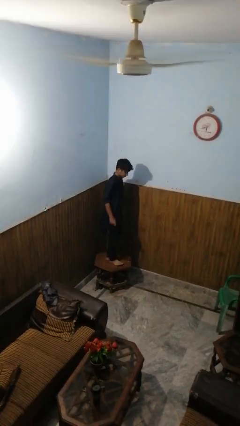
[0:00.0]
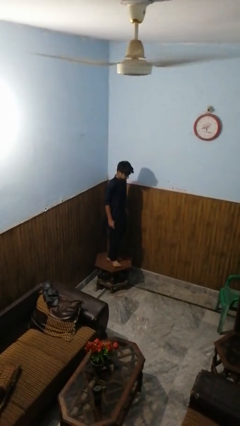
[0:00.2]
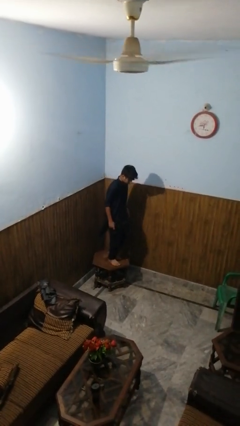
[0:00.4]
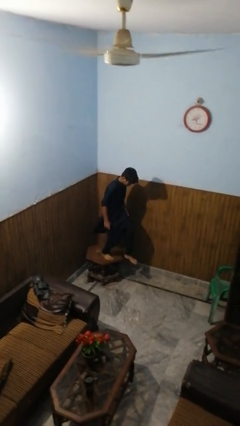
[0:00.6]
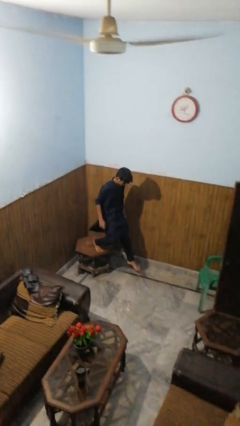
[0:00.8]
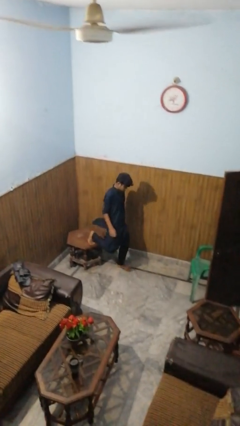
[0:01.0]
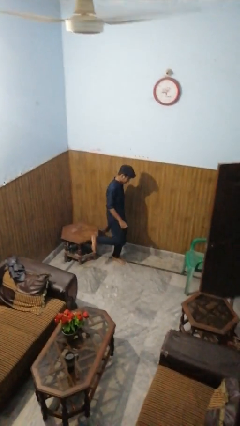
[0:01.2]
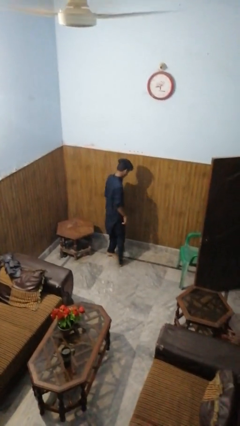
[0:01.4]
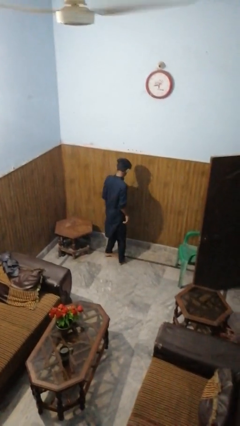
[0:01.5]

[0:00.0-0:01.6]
person climbs off table

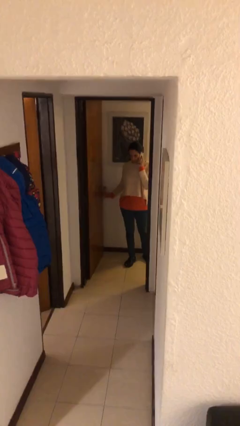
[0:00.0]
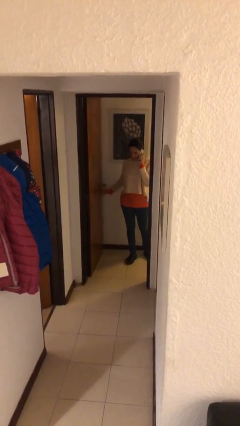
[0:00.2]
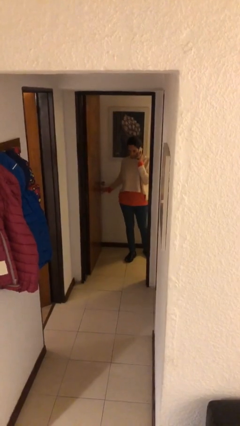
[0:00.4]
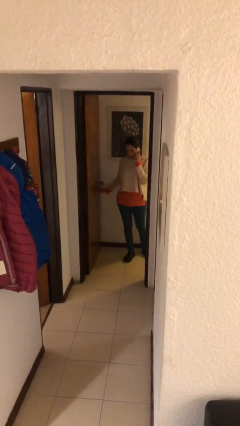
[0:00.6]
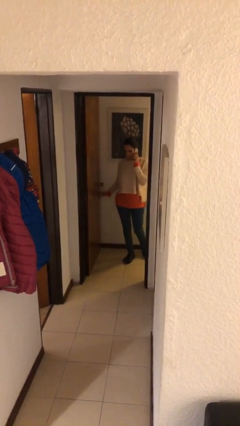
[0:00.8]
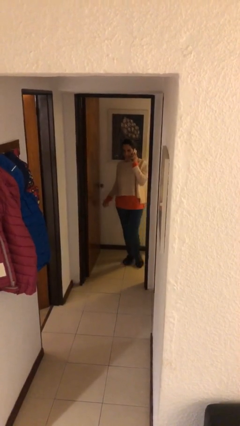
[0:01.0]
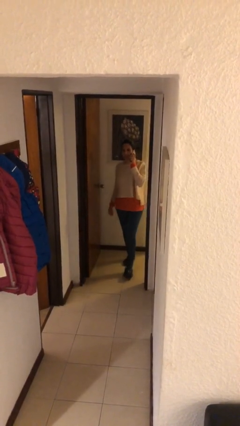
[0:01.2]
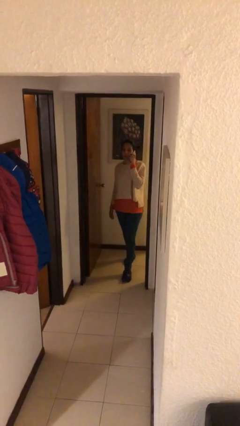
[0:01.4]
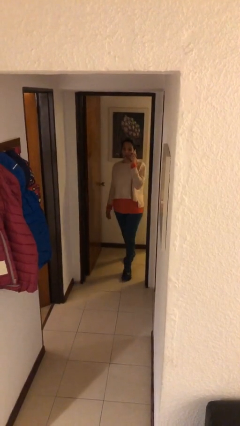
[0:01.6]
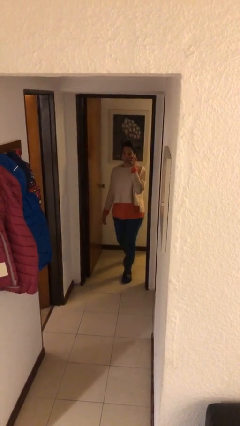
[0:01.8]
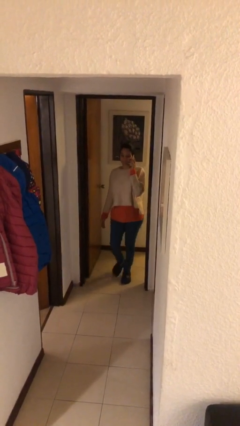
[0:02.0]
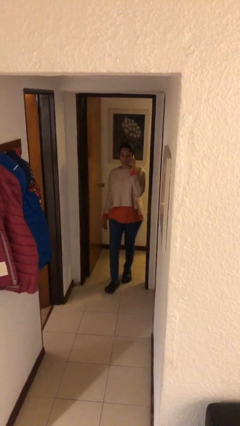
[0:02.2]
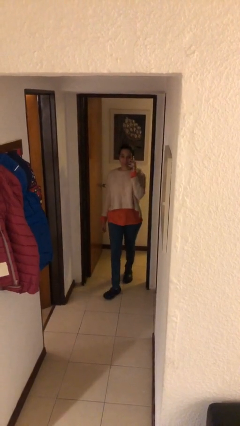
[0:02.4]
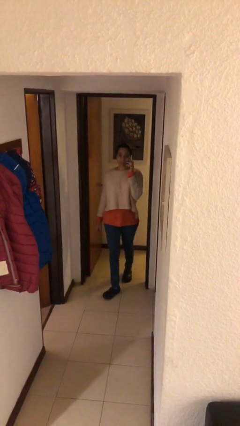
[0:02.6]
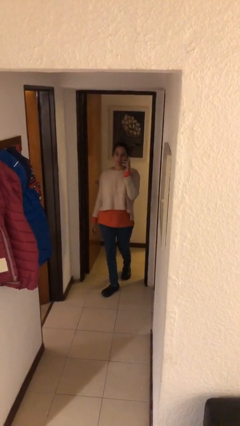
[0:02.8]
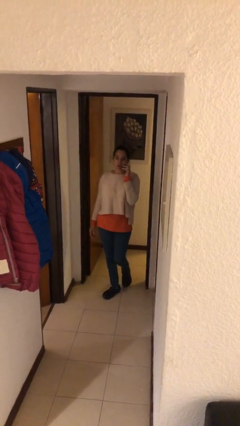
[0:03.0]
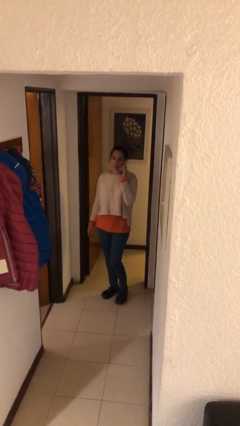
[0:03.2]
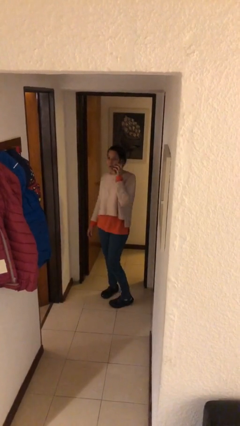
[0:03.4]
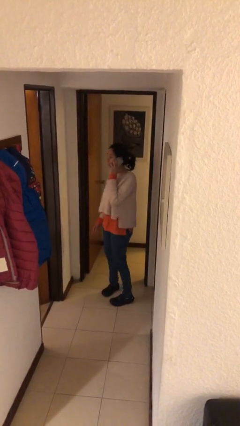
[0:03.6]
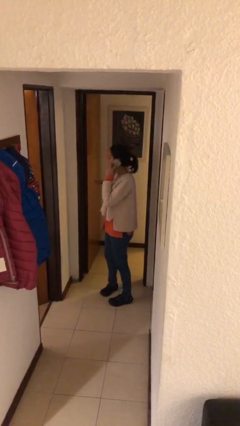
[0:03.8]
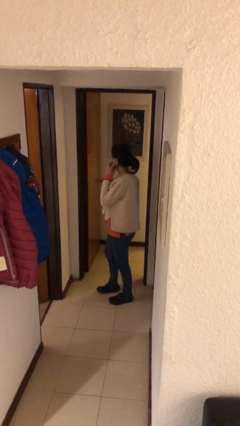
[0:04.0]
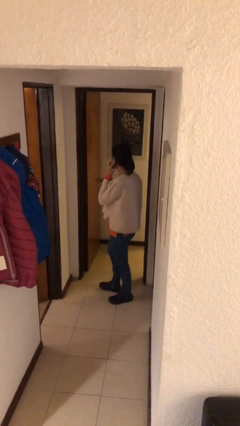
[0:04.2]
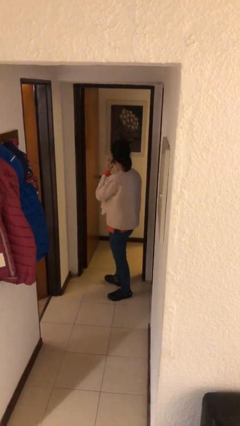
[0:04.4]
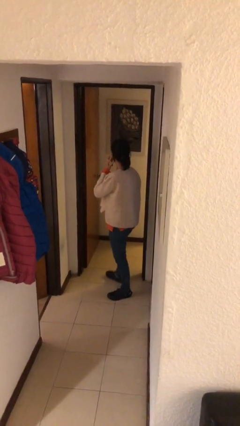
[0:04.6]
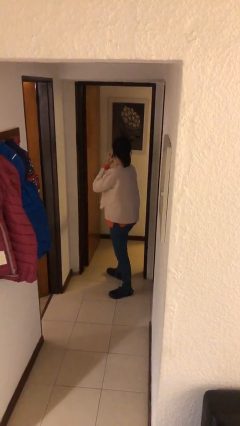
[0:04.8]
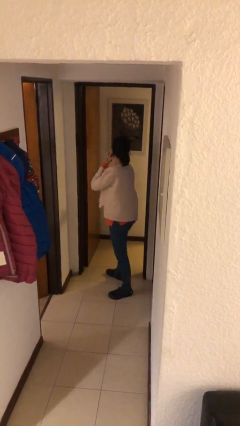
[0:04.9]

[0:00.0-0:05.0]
person enters scene through structure

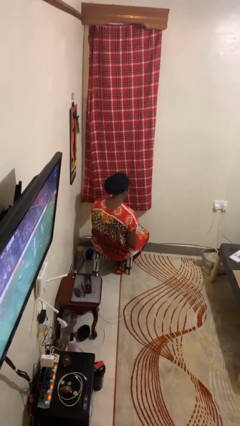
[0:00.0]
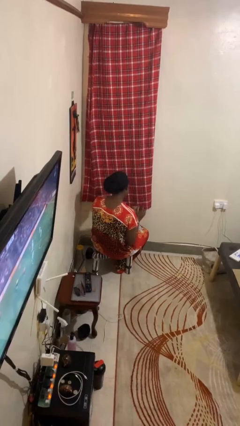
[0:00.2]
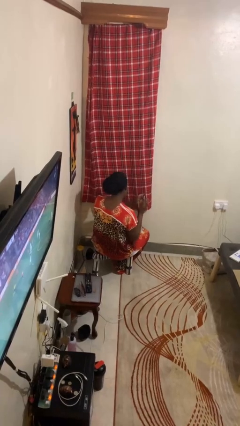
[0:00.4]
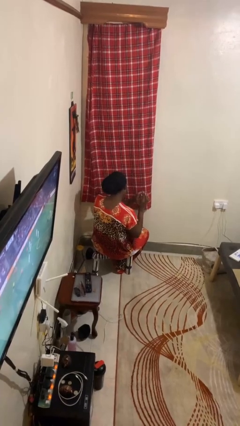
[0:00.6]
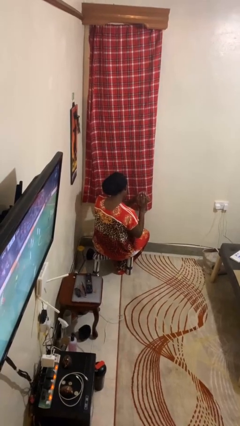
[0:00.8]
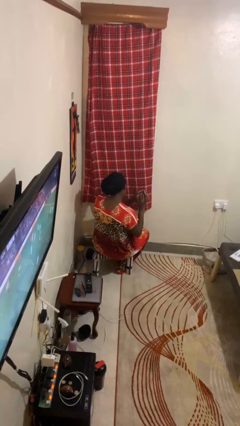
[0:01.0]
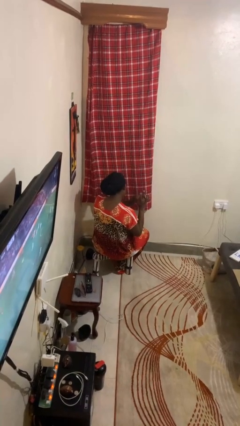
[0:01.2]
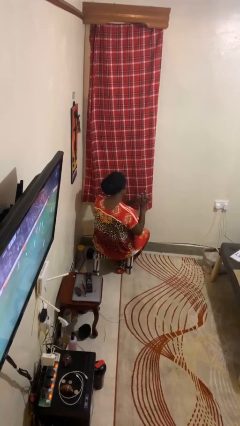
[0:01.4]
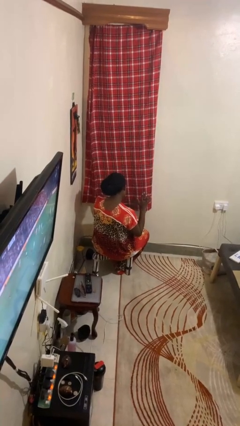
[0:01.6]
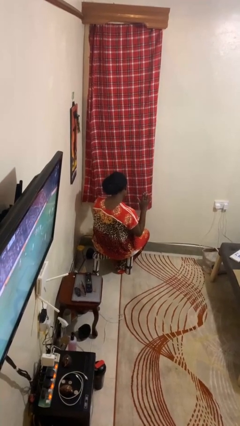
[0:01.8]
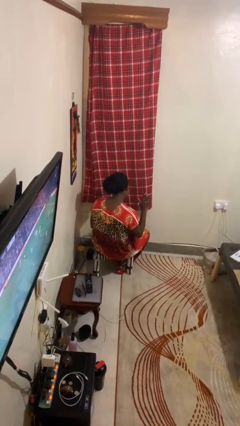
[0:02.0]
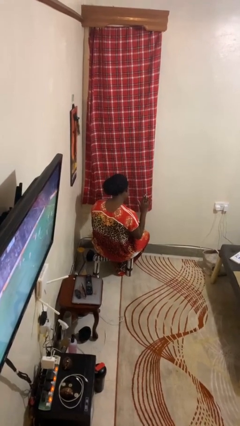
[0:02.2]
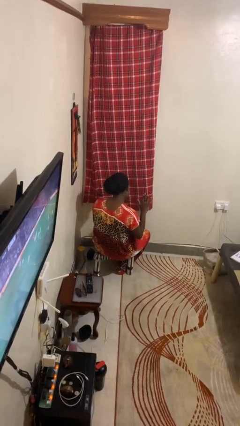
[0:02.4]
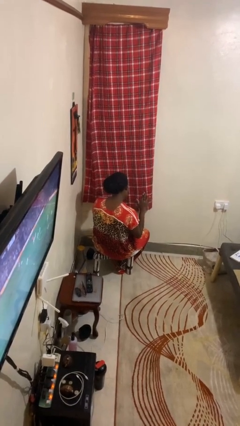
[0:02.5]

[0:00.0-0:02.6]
person puts on ring

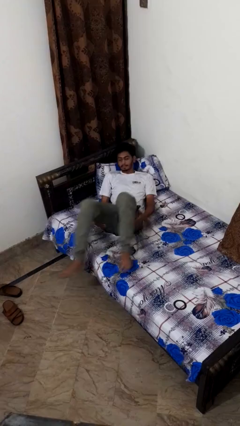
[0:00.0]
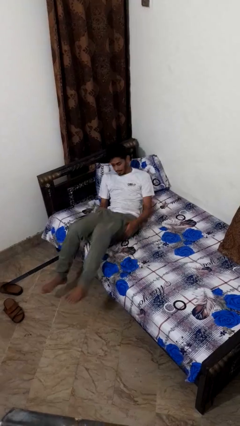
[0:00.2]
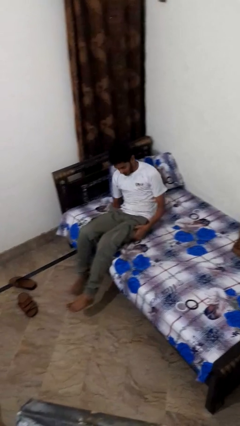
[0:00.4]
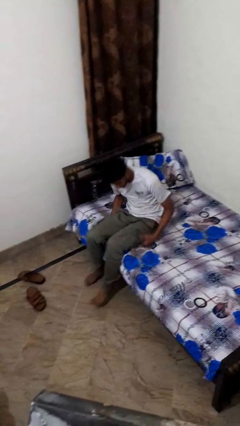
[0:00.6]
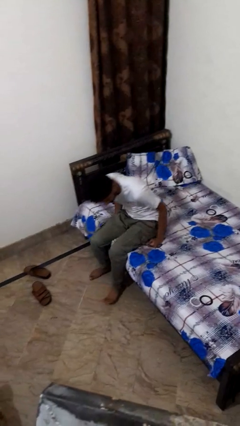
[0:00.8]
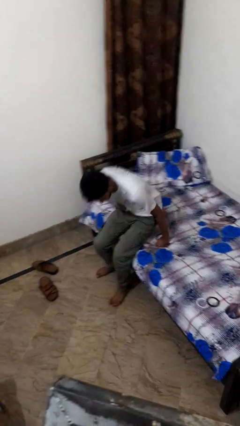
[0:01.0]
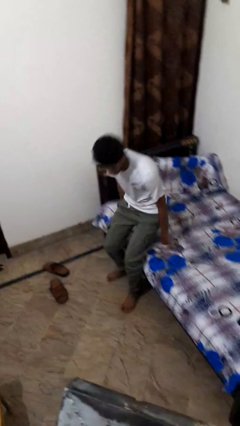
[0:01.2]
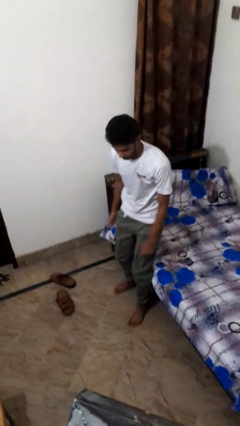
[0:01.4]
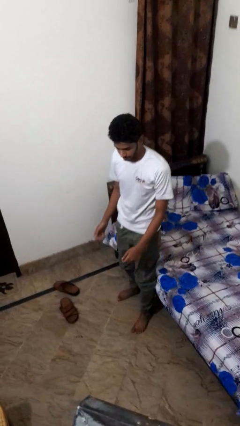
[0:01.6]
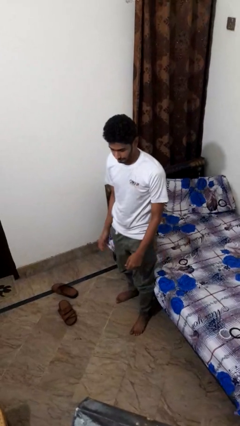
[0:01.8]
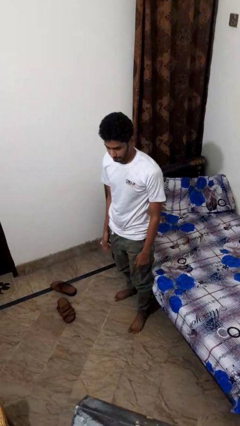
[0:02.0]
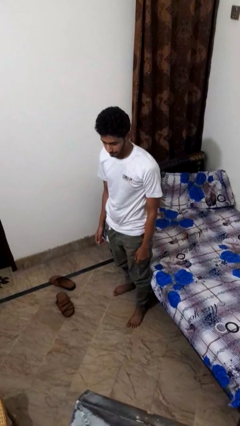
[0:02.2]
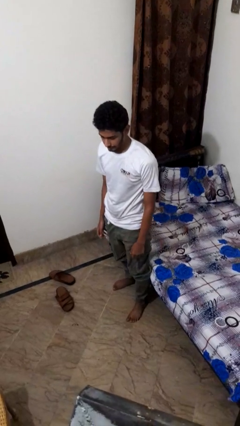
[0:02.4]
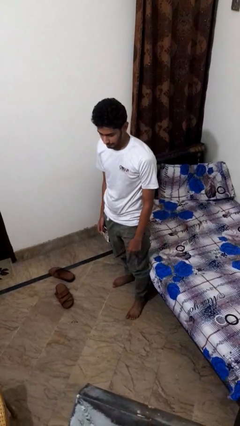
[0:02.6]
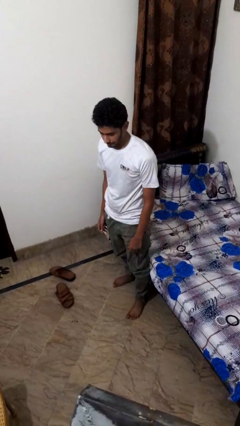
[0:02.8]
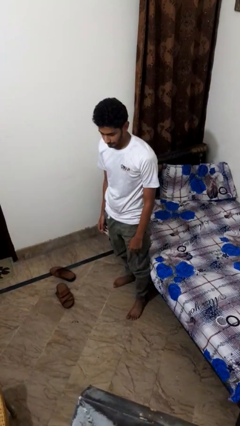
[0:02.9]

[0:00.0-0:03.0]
person stands up

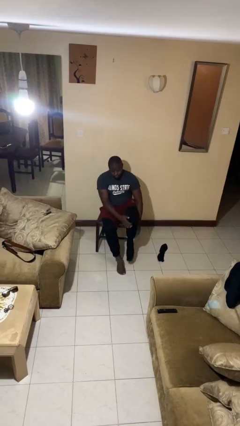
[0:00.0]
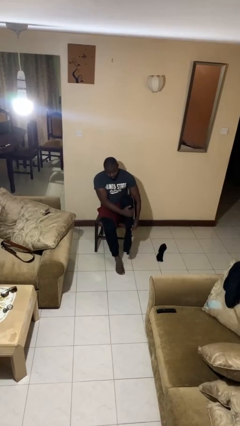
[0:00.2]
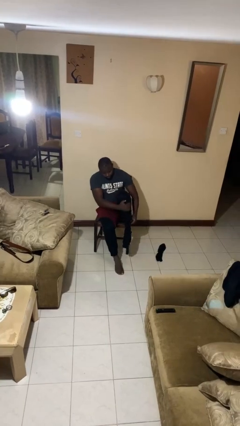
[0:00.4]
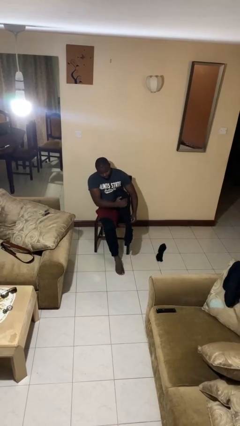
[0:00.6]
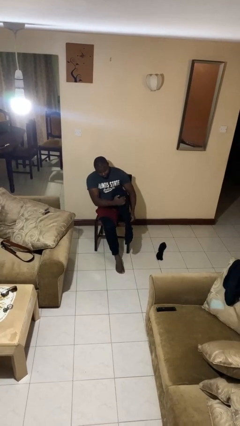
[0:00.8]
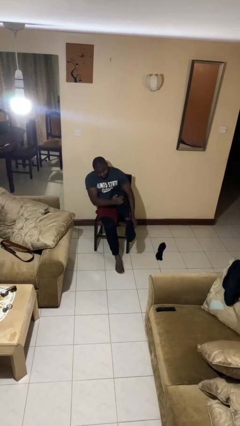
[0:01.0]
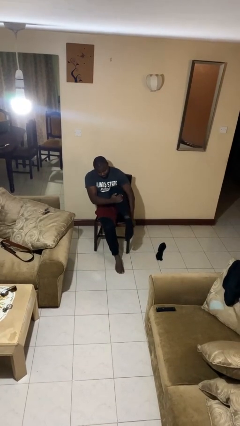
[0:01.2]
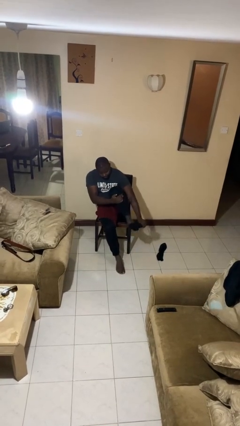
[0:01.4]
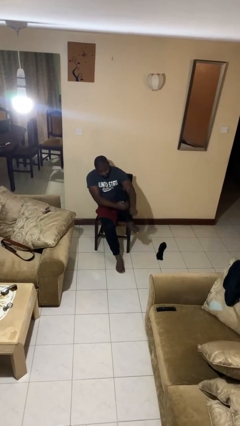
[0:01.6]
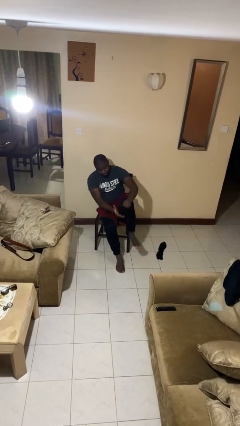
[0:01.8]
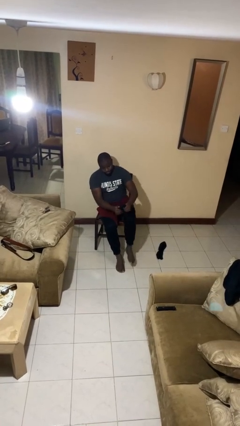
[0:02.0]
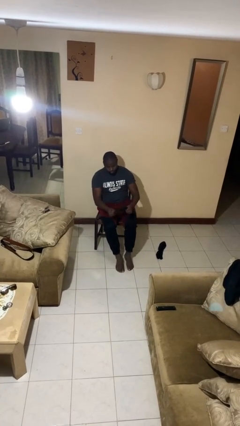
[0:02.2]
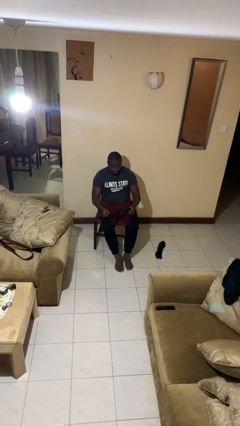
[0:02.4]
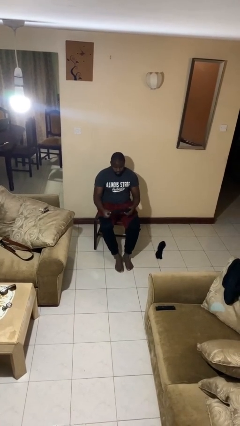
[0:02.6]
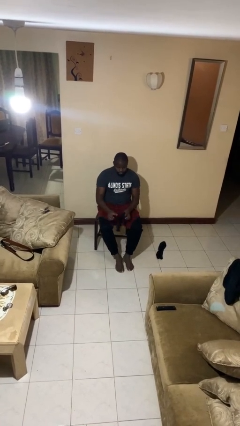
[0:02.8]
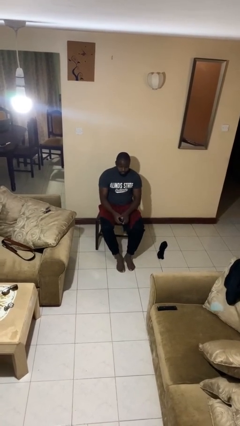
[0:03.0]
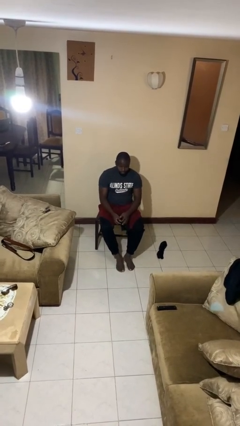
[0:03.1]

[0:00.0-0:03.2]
person takes off socks

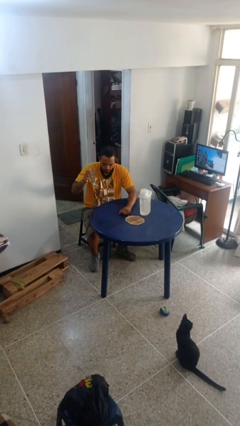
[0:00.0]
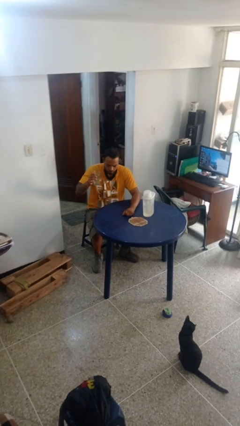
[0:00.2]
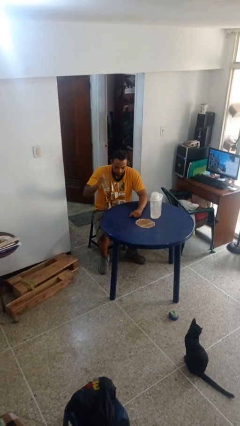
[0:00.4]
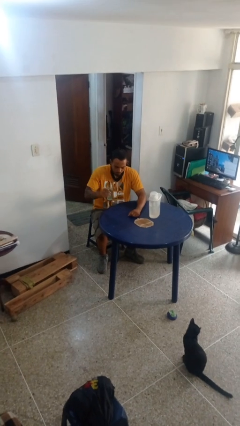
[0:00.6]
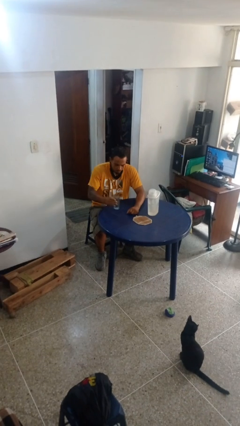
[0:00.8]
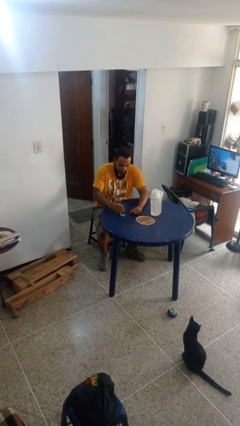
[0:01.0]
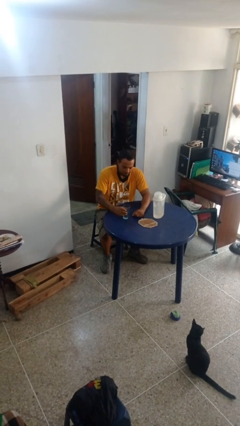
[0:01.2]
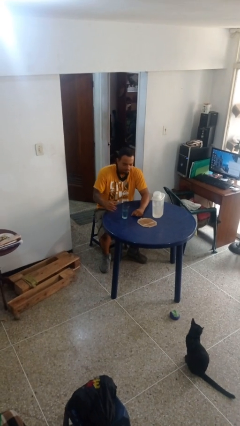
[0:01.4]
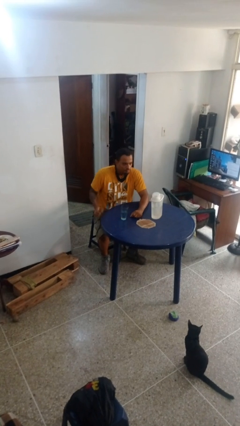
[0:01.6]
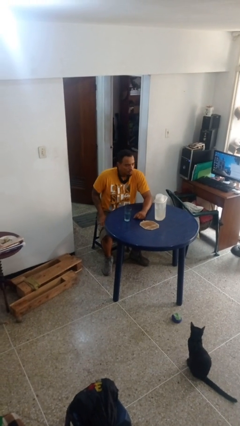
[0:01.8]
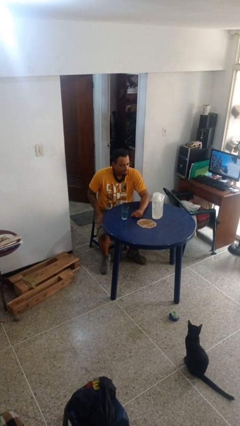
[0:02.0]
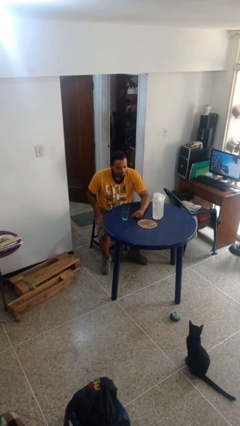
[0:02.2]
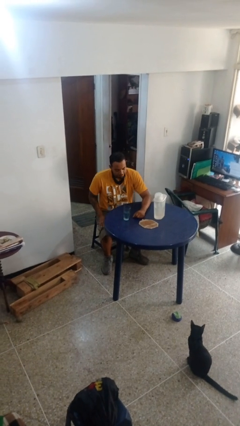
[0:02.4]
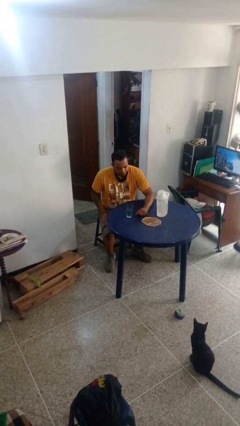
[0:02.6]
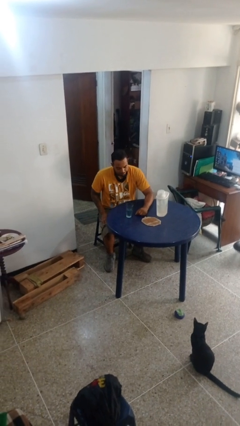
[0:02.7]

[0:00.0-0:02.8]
person puts down object on table
